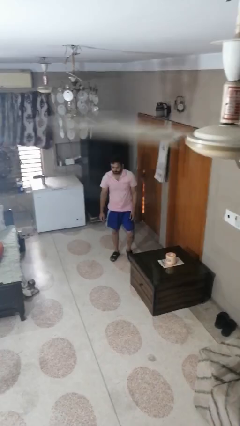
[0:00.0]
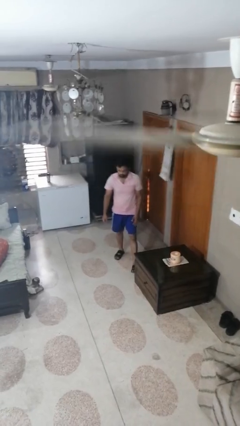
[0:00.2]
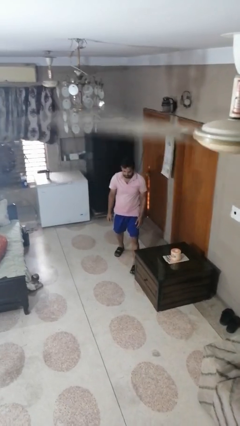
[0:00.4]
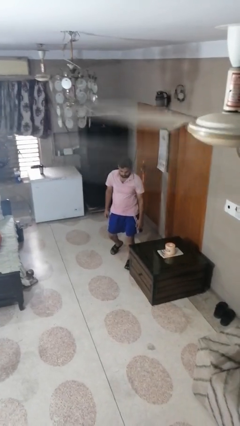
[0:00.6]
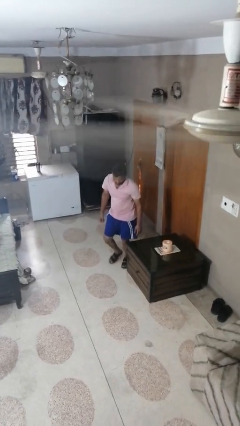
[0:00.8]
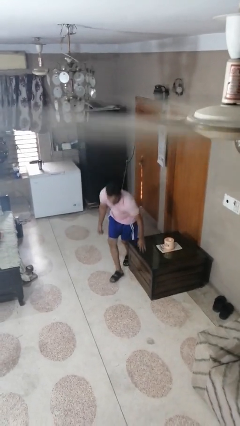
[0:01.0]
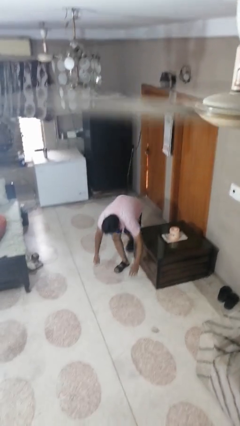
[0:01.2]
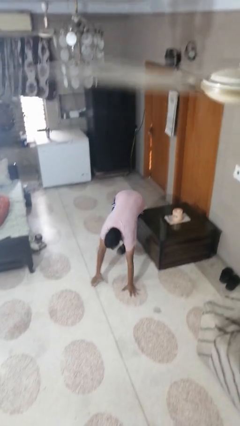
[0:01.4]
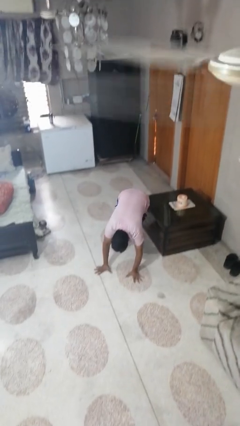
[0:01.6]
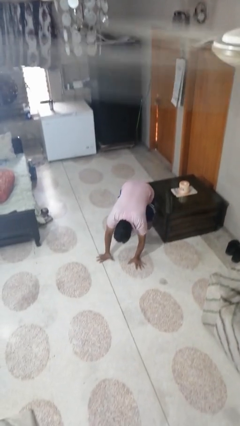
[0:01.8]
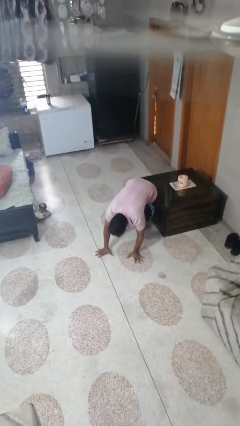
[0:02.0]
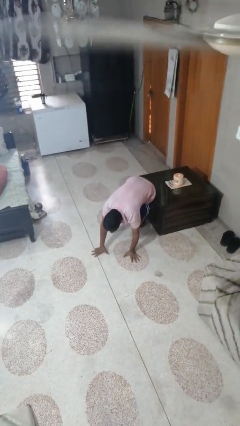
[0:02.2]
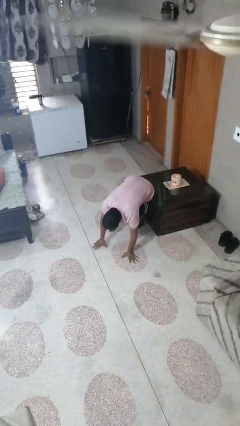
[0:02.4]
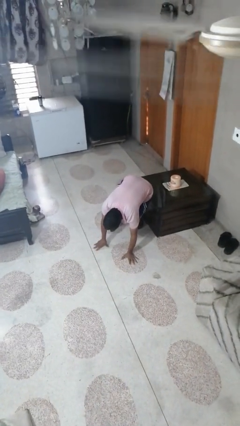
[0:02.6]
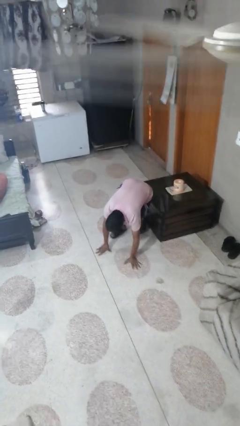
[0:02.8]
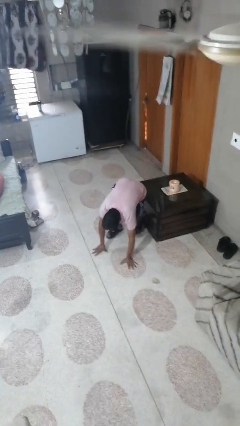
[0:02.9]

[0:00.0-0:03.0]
person bumps into table

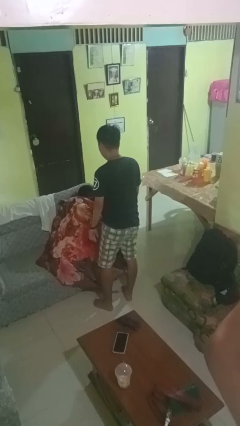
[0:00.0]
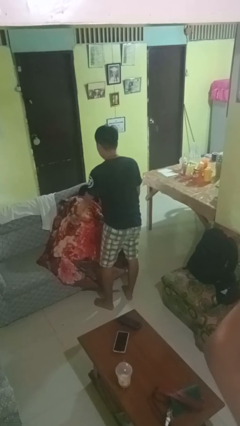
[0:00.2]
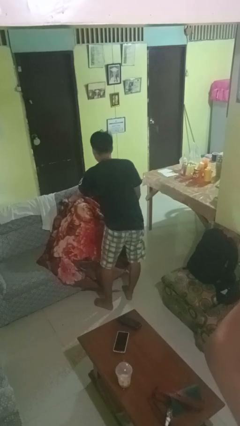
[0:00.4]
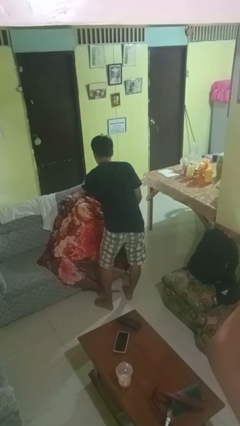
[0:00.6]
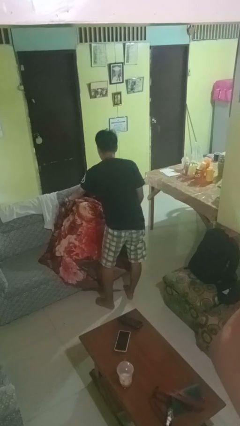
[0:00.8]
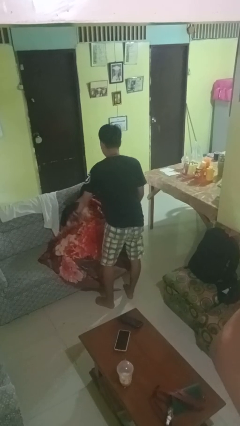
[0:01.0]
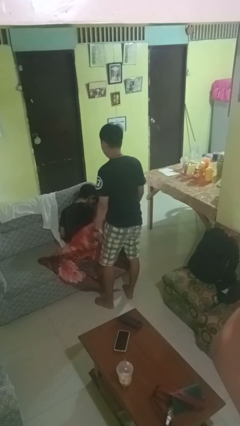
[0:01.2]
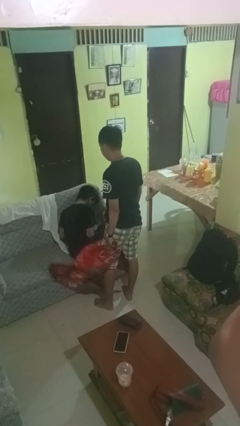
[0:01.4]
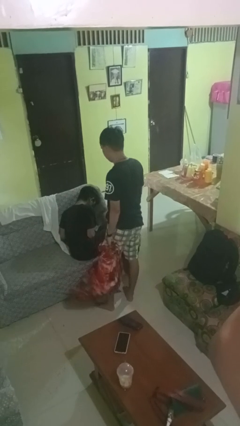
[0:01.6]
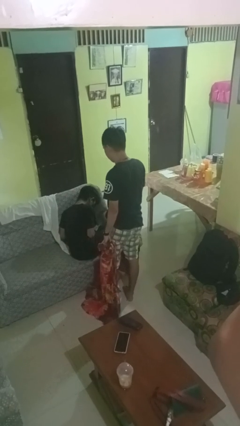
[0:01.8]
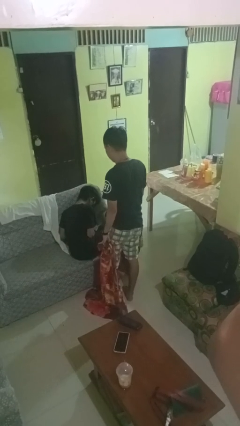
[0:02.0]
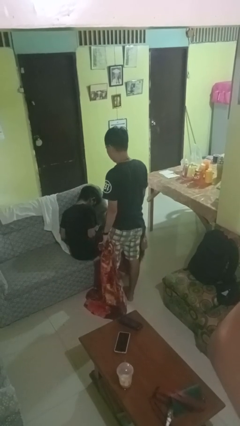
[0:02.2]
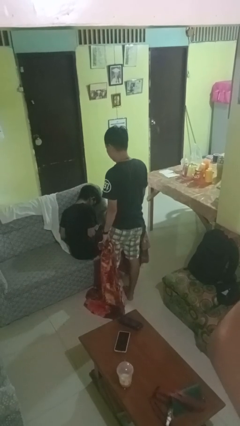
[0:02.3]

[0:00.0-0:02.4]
person uncovers friend with blanket

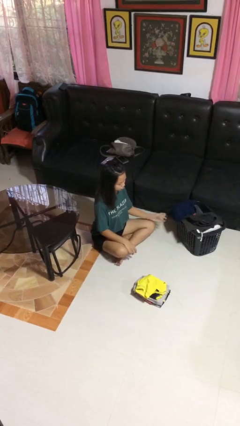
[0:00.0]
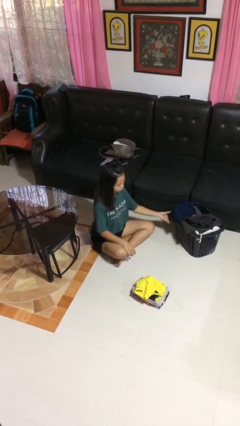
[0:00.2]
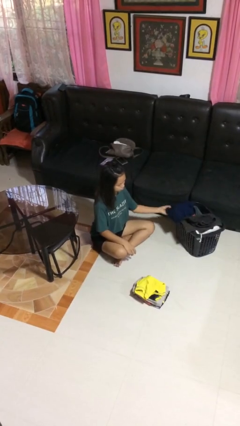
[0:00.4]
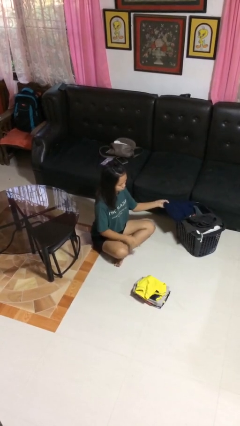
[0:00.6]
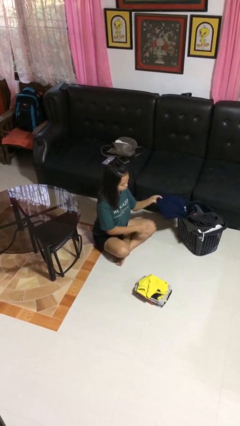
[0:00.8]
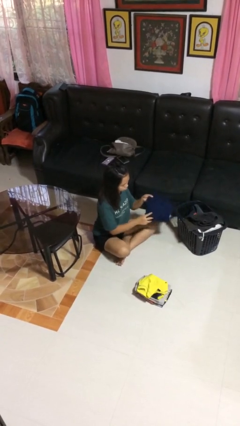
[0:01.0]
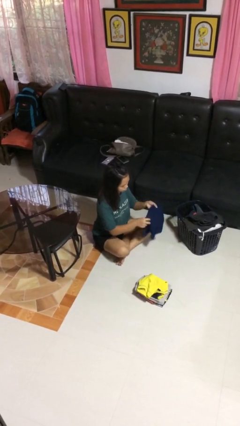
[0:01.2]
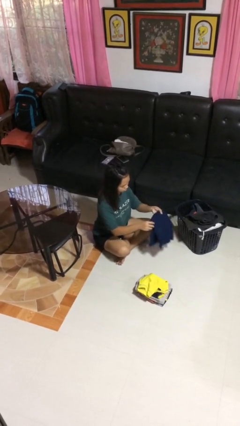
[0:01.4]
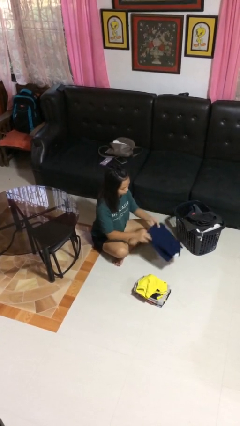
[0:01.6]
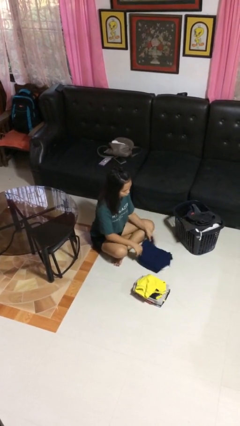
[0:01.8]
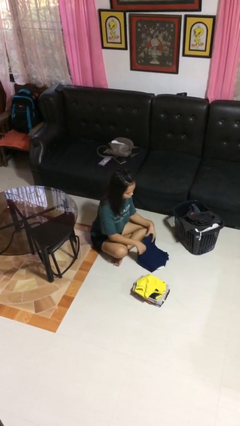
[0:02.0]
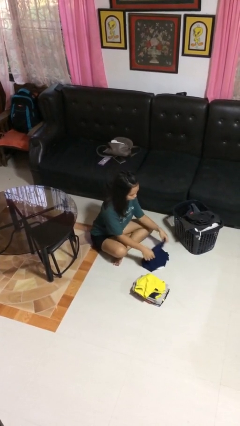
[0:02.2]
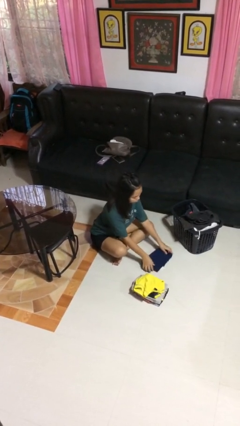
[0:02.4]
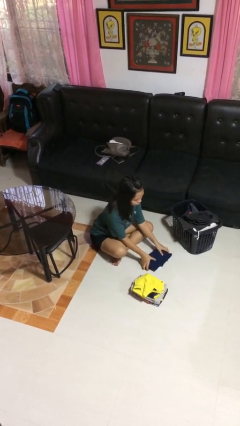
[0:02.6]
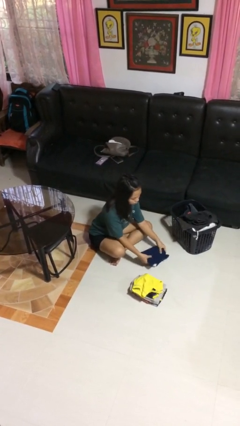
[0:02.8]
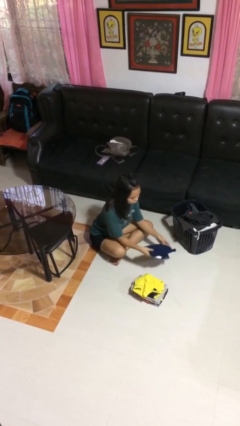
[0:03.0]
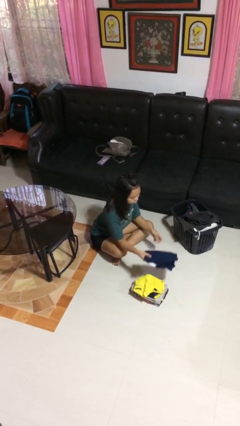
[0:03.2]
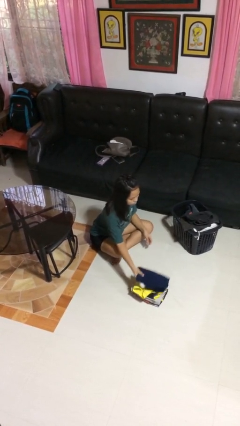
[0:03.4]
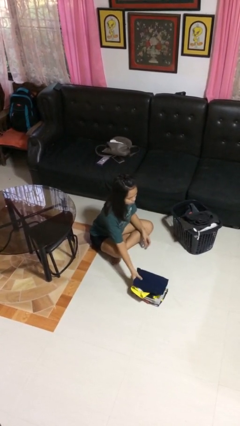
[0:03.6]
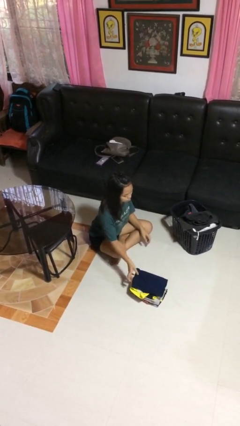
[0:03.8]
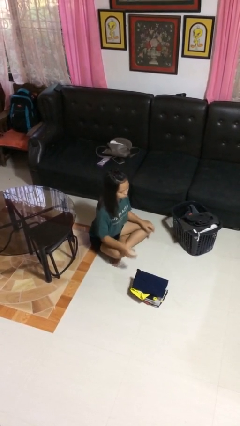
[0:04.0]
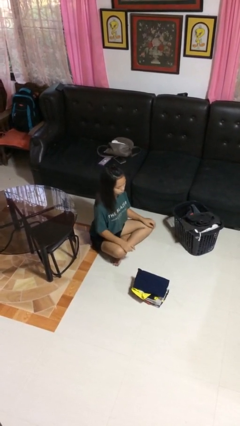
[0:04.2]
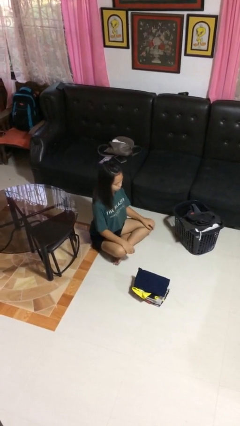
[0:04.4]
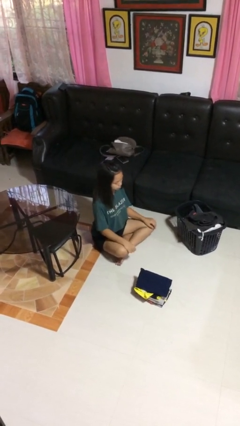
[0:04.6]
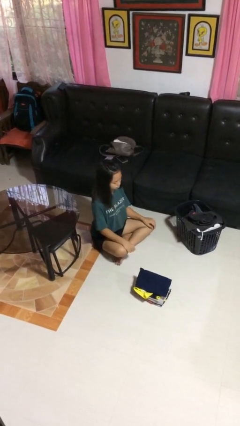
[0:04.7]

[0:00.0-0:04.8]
person folds shirt

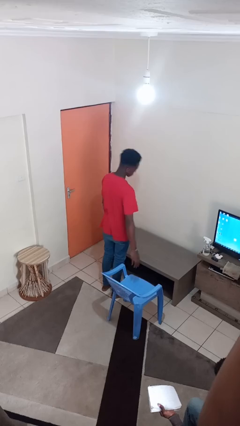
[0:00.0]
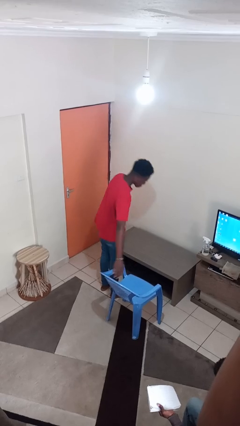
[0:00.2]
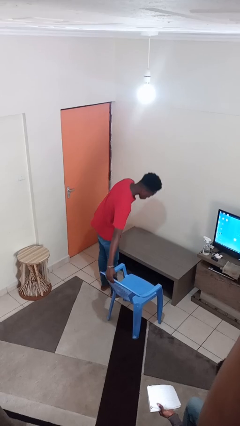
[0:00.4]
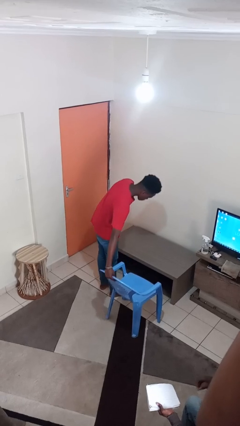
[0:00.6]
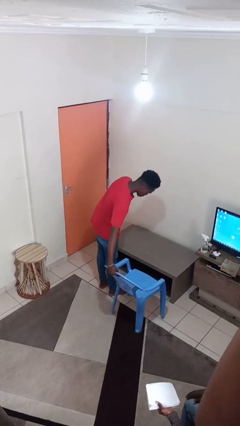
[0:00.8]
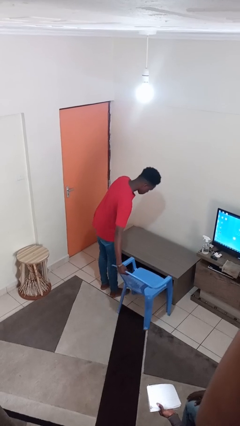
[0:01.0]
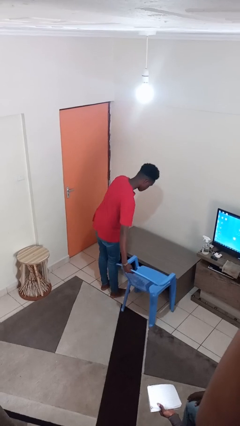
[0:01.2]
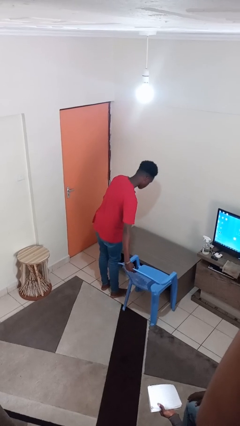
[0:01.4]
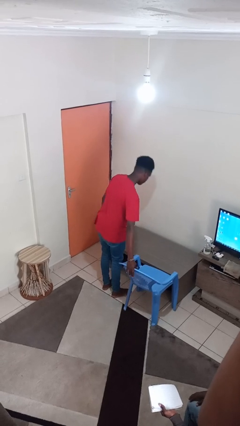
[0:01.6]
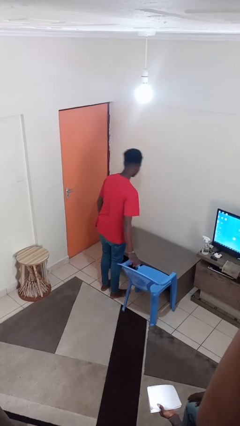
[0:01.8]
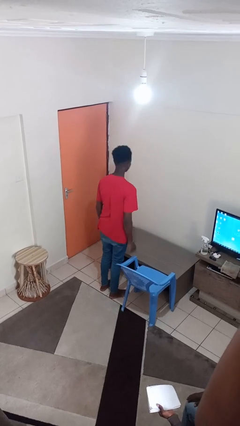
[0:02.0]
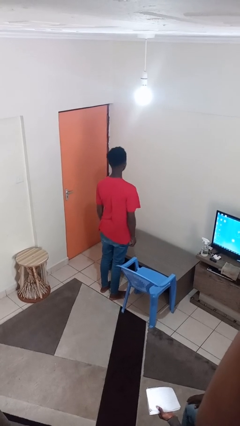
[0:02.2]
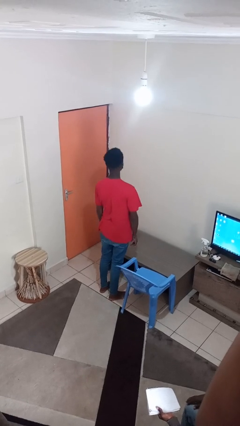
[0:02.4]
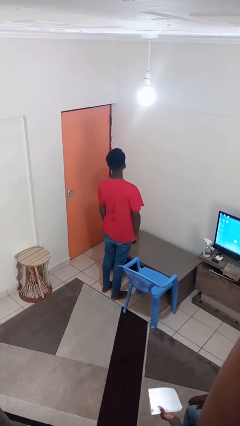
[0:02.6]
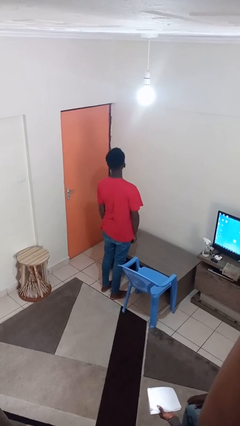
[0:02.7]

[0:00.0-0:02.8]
person pushes in chair

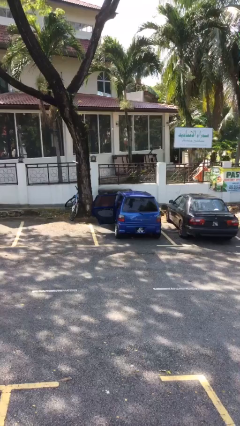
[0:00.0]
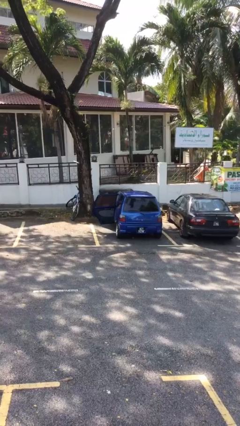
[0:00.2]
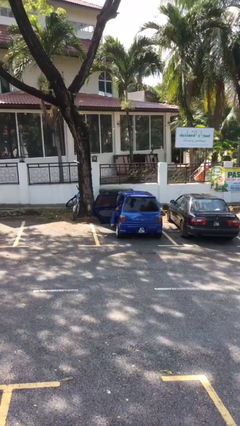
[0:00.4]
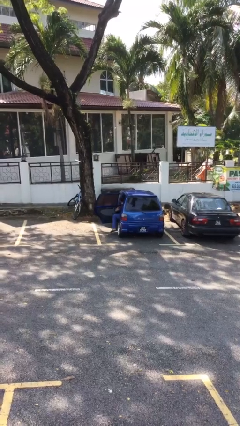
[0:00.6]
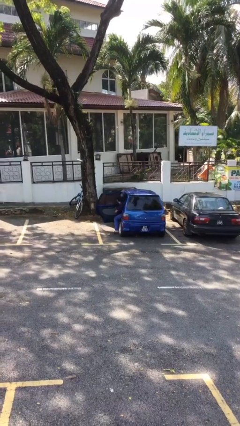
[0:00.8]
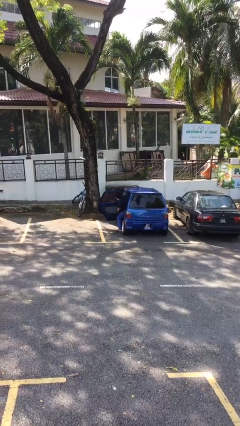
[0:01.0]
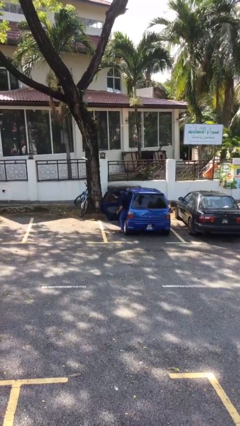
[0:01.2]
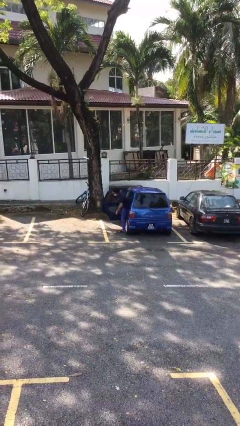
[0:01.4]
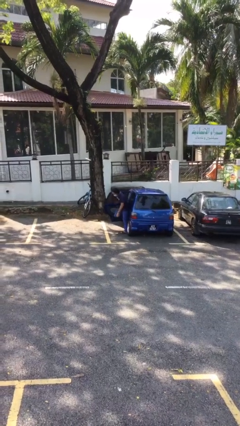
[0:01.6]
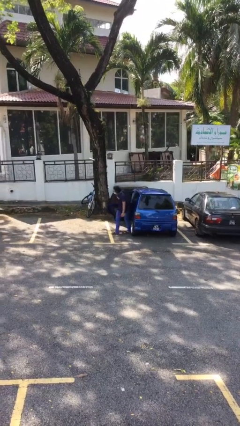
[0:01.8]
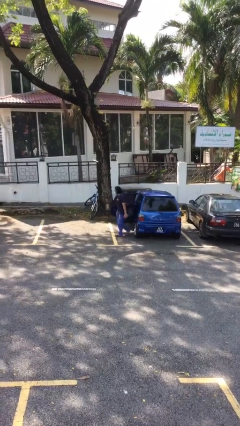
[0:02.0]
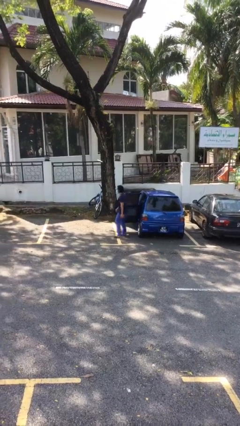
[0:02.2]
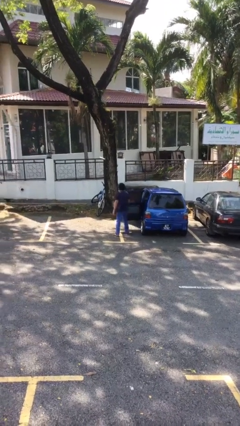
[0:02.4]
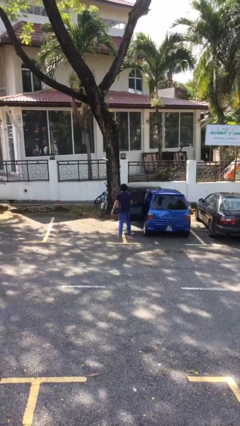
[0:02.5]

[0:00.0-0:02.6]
person exits car

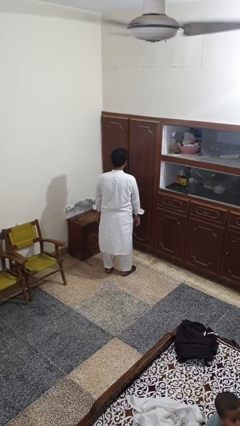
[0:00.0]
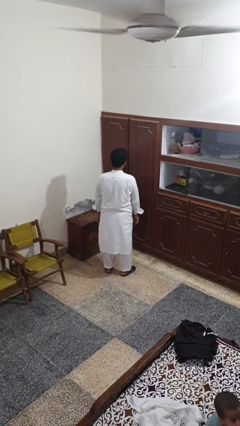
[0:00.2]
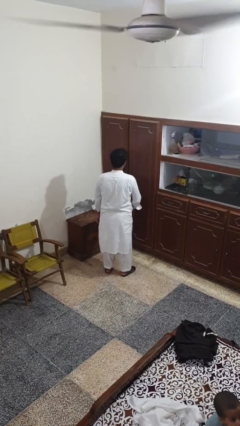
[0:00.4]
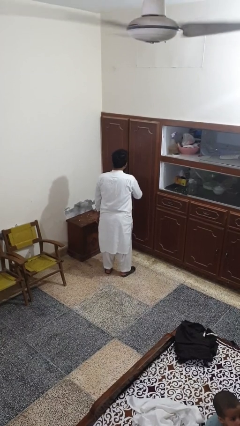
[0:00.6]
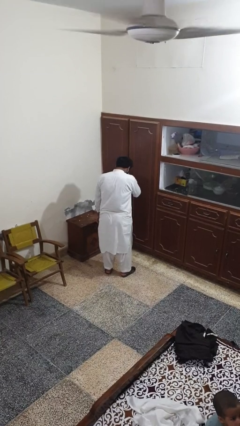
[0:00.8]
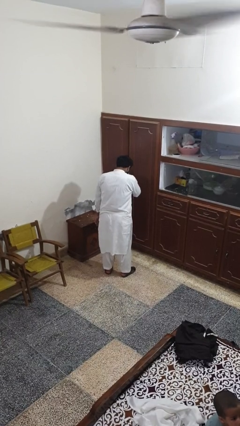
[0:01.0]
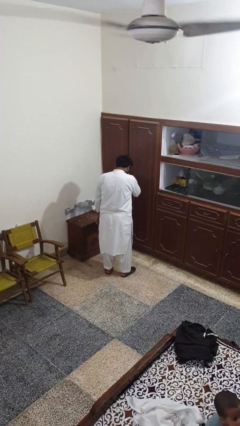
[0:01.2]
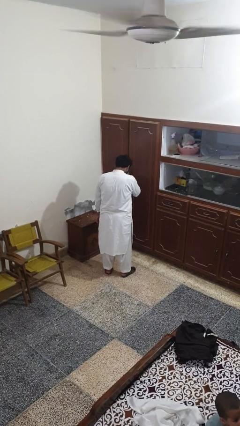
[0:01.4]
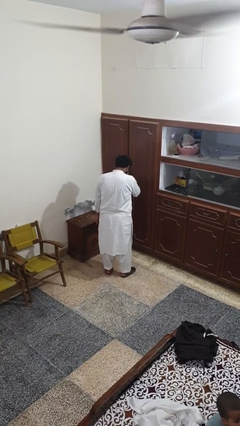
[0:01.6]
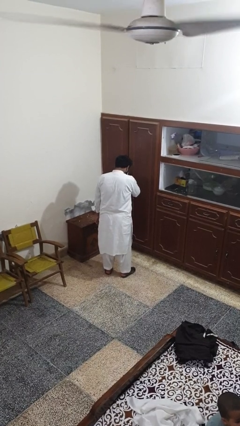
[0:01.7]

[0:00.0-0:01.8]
person sneezes into hand

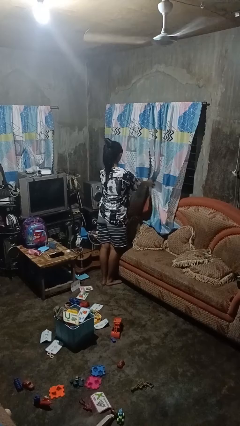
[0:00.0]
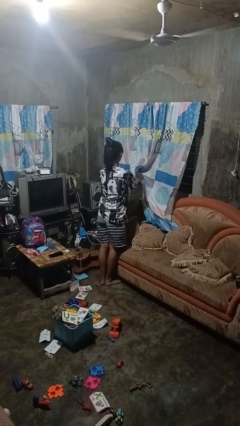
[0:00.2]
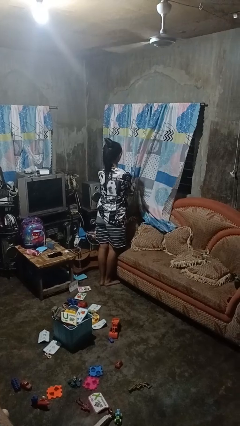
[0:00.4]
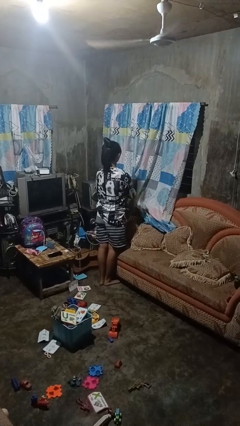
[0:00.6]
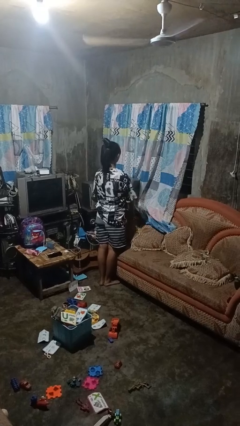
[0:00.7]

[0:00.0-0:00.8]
person closes curtains
